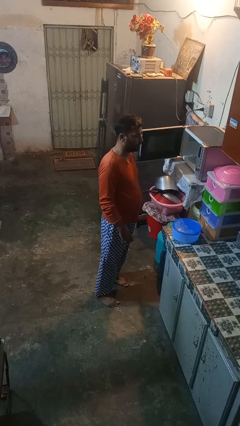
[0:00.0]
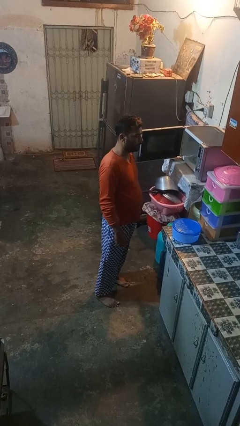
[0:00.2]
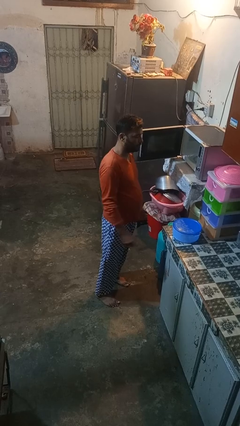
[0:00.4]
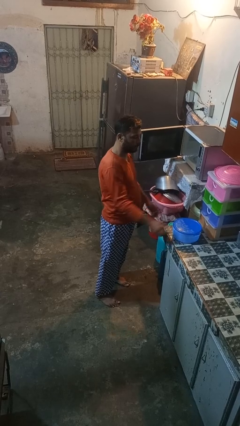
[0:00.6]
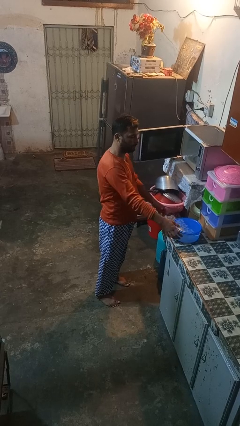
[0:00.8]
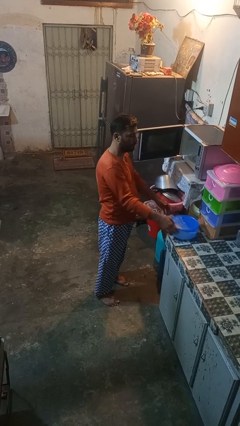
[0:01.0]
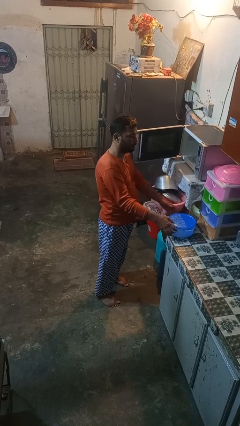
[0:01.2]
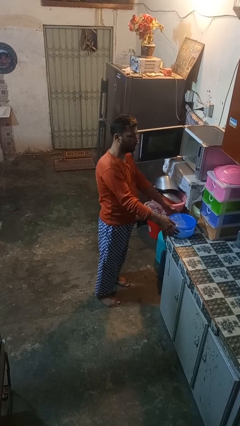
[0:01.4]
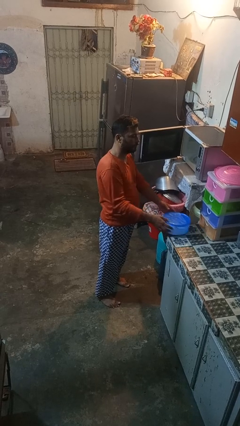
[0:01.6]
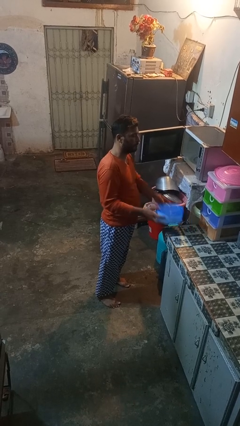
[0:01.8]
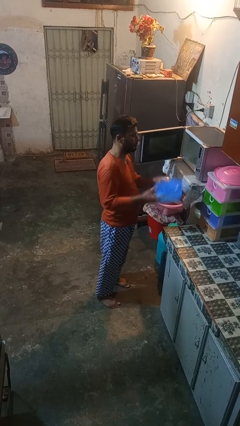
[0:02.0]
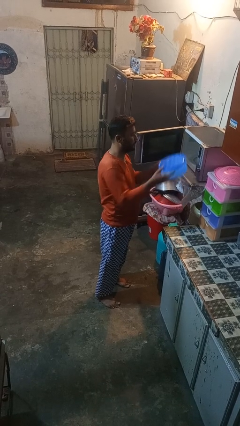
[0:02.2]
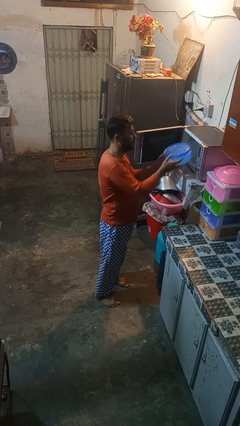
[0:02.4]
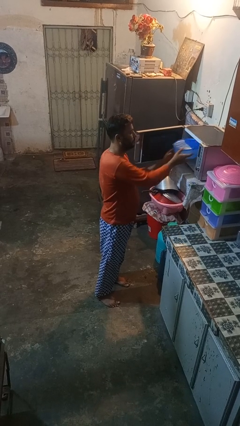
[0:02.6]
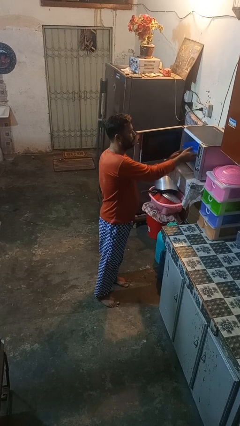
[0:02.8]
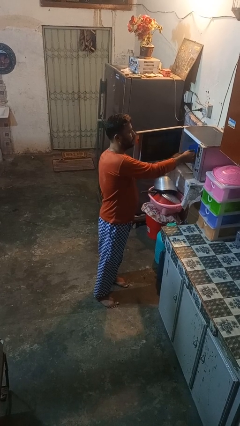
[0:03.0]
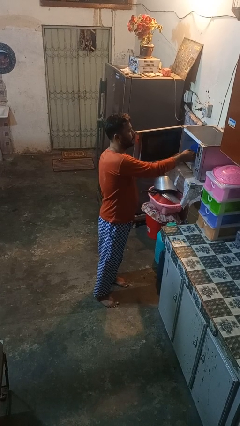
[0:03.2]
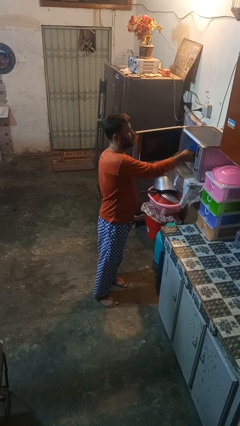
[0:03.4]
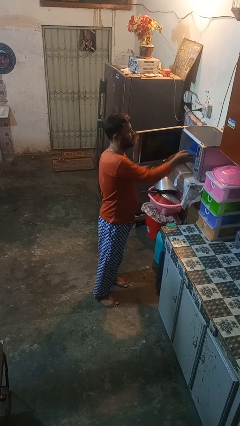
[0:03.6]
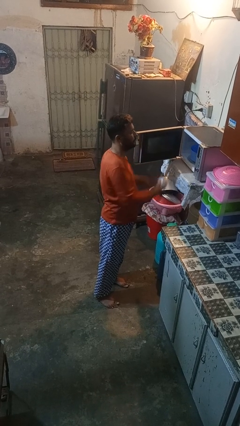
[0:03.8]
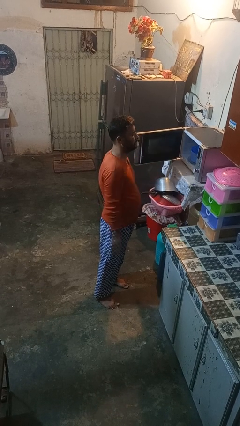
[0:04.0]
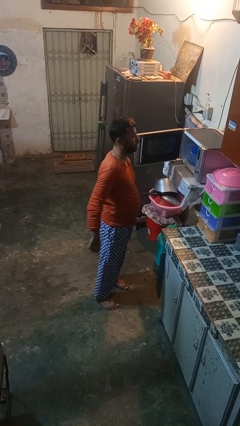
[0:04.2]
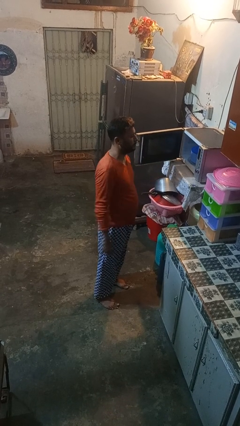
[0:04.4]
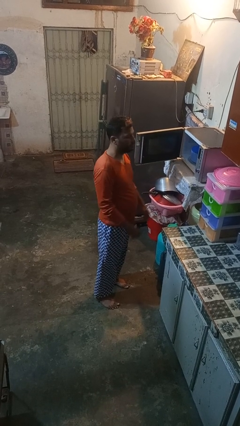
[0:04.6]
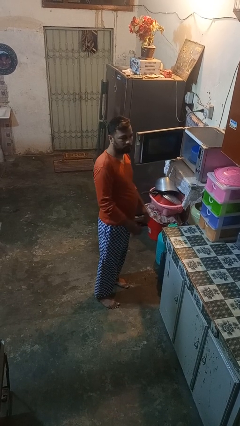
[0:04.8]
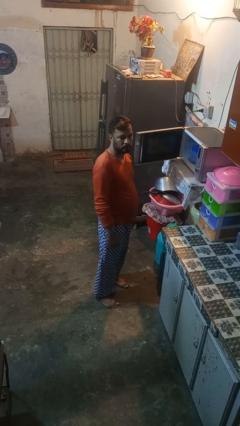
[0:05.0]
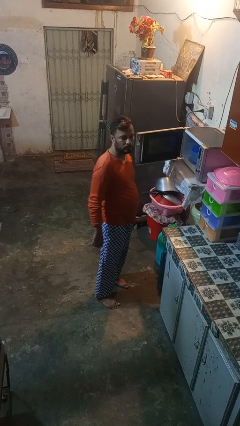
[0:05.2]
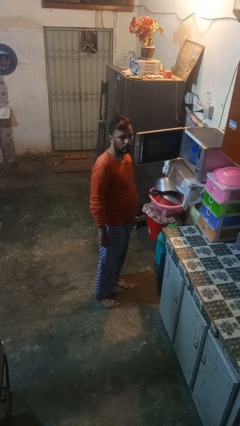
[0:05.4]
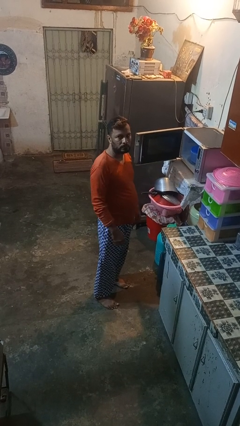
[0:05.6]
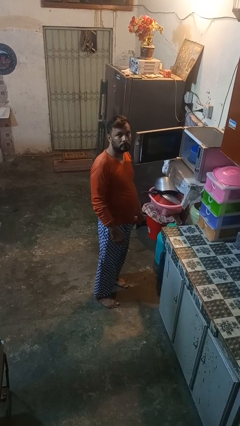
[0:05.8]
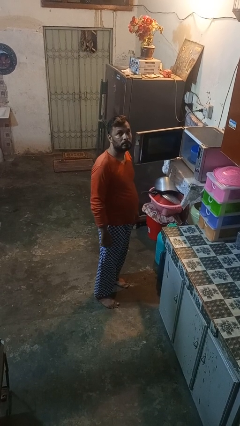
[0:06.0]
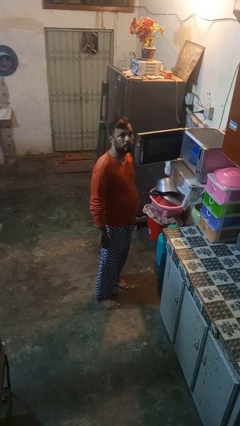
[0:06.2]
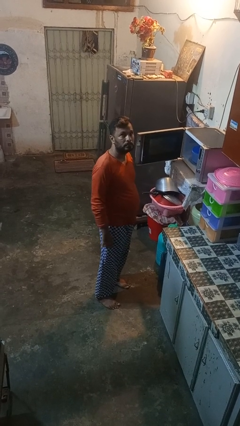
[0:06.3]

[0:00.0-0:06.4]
person puts object into microwave

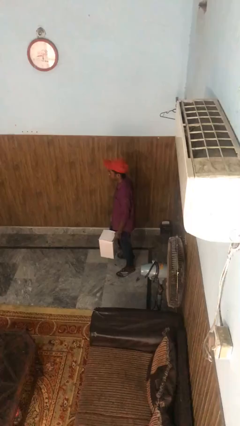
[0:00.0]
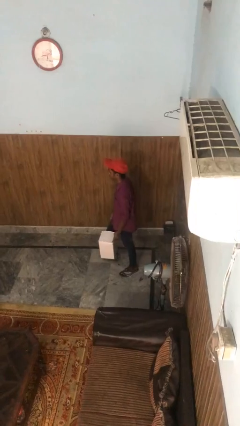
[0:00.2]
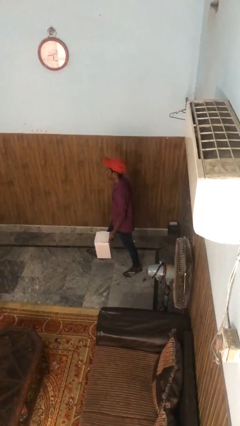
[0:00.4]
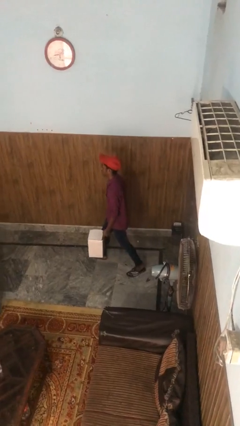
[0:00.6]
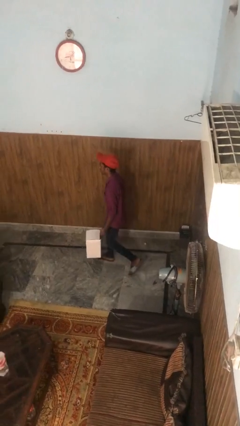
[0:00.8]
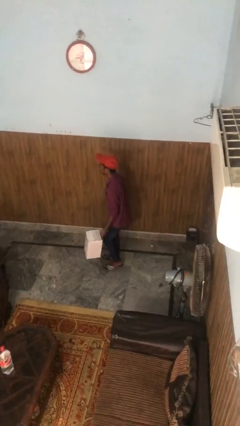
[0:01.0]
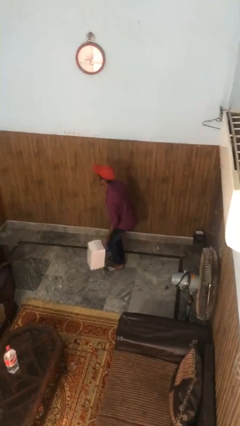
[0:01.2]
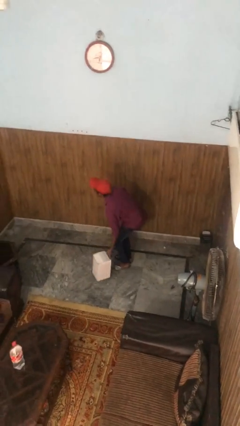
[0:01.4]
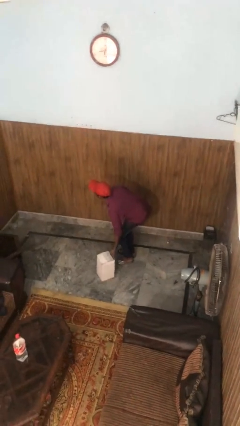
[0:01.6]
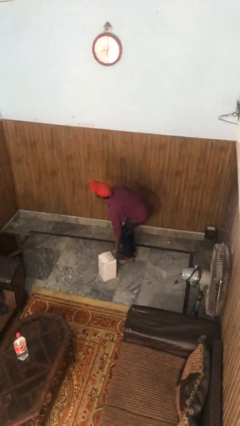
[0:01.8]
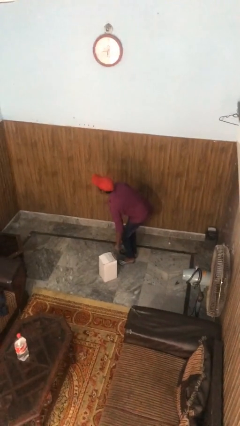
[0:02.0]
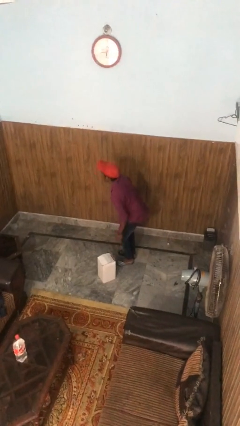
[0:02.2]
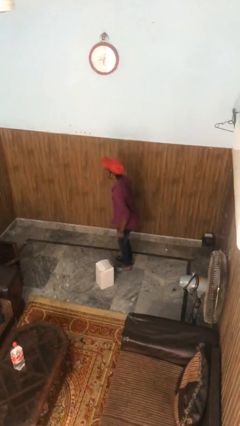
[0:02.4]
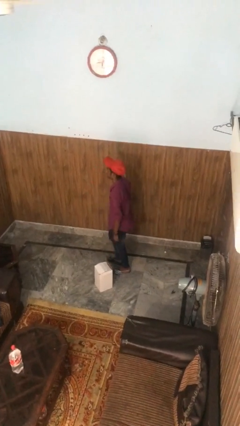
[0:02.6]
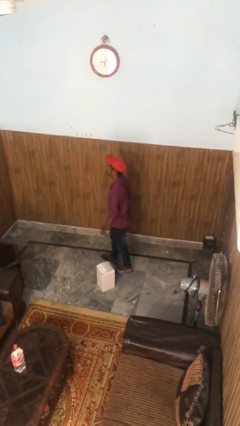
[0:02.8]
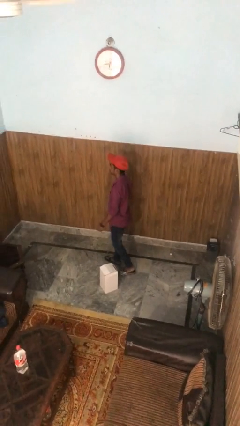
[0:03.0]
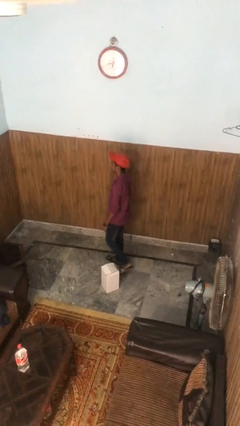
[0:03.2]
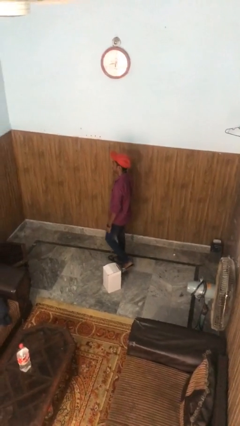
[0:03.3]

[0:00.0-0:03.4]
person puts down object on floor

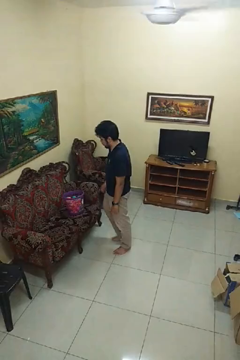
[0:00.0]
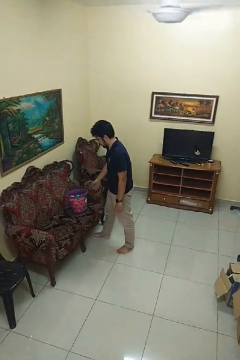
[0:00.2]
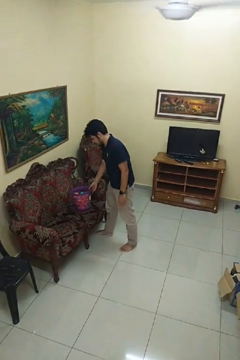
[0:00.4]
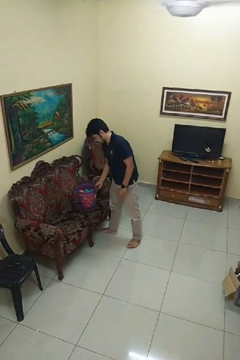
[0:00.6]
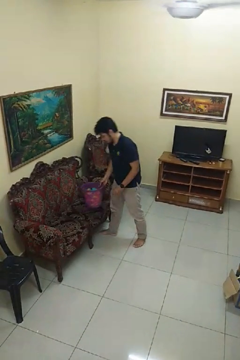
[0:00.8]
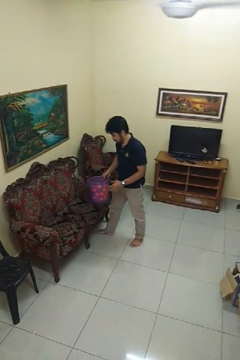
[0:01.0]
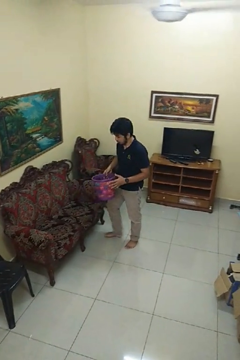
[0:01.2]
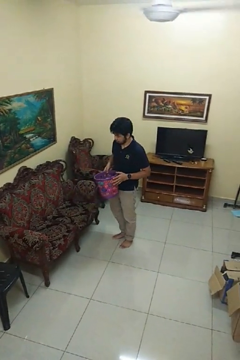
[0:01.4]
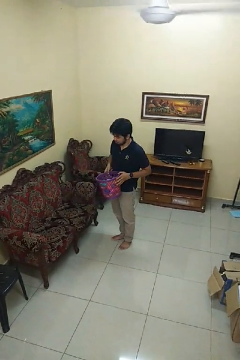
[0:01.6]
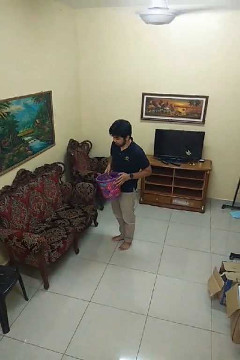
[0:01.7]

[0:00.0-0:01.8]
person picks up object from couch

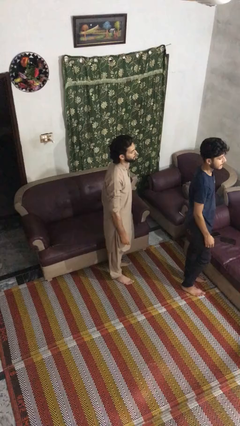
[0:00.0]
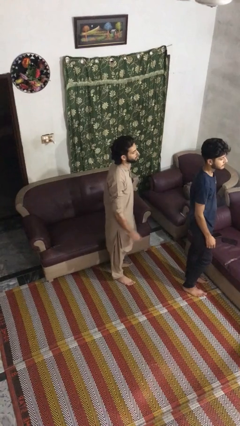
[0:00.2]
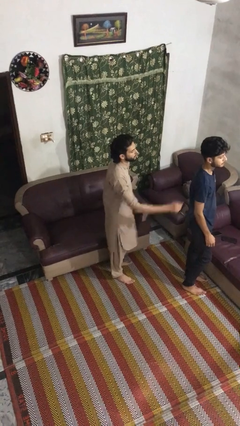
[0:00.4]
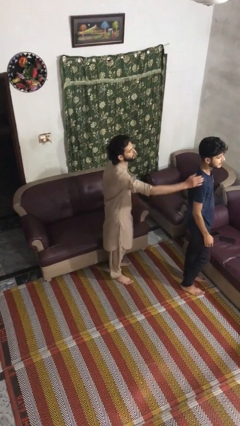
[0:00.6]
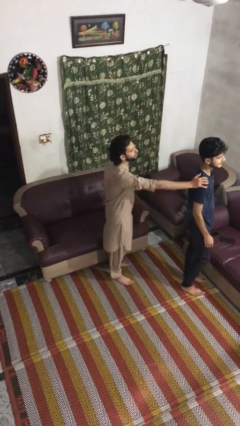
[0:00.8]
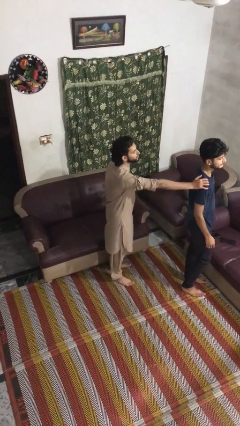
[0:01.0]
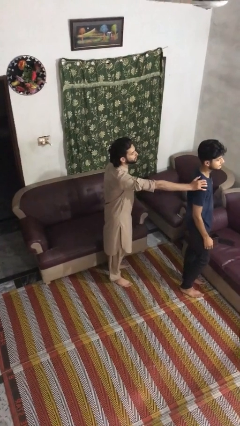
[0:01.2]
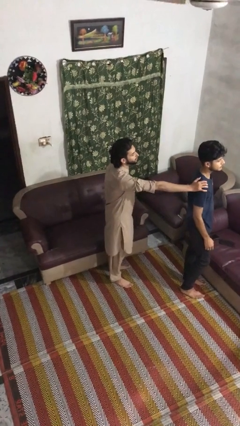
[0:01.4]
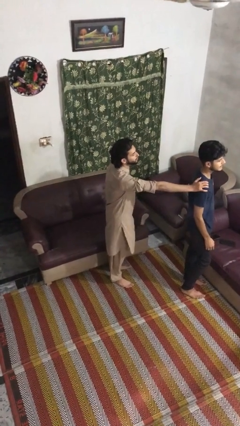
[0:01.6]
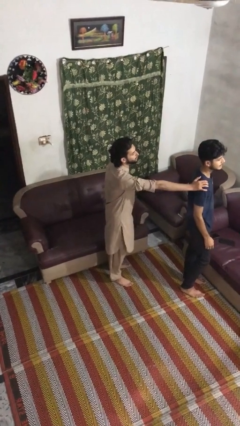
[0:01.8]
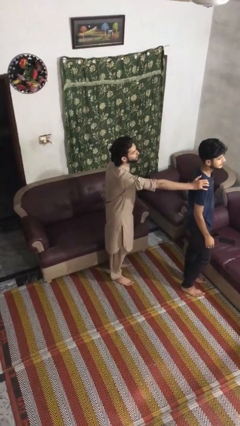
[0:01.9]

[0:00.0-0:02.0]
person grabs person by shoulder

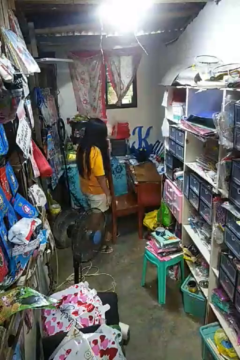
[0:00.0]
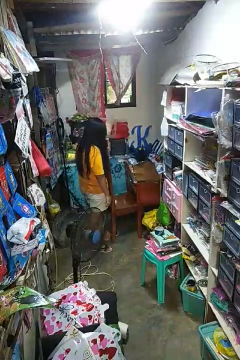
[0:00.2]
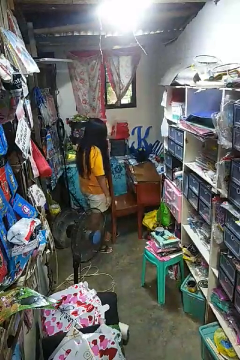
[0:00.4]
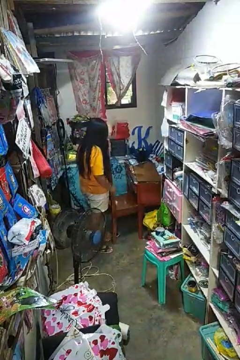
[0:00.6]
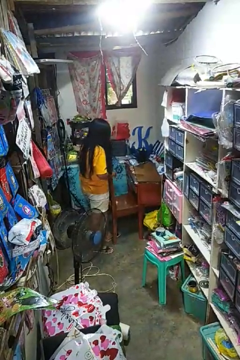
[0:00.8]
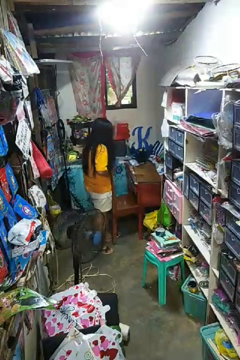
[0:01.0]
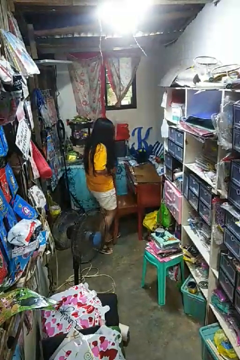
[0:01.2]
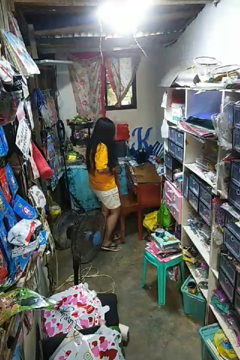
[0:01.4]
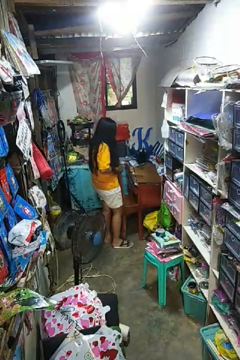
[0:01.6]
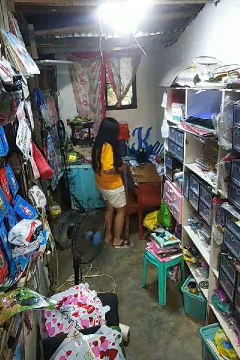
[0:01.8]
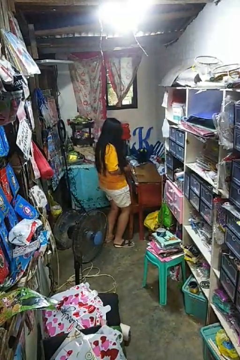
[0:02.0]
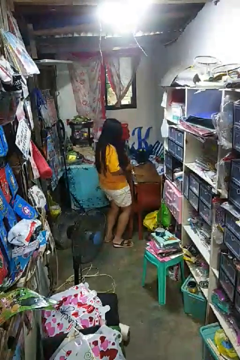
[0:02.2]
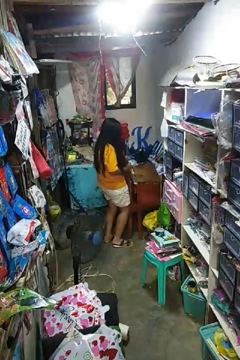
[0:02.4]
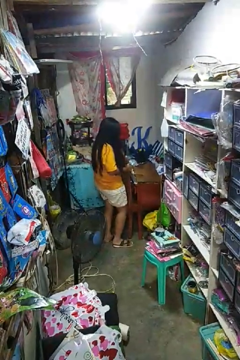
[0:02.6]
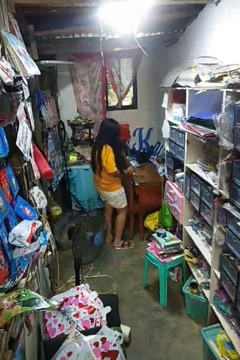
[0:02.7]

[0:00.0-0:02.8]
person pushes in chair

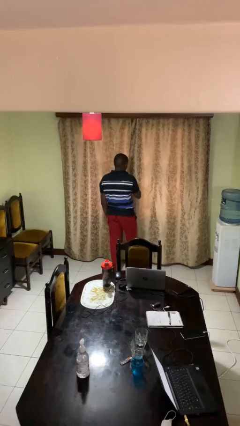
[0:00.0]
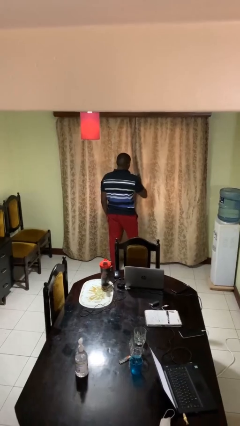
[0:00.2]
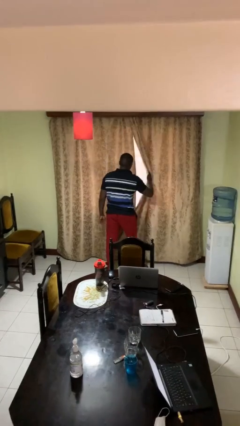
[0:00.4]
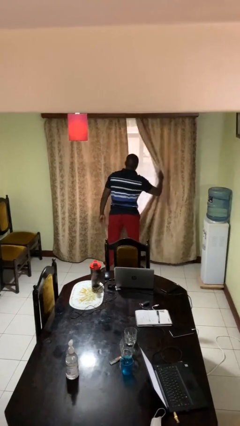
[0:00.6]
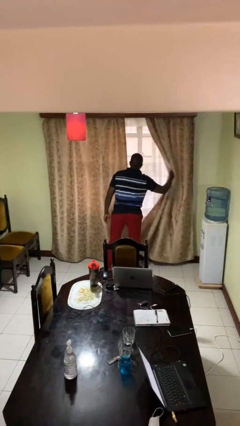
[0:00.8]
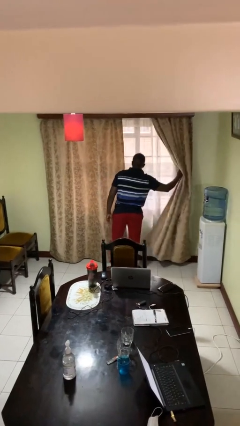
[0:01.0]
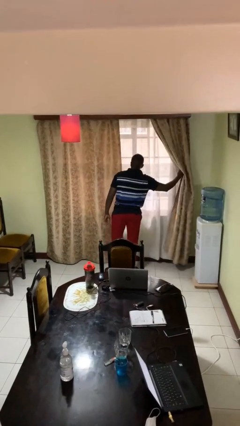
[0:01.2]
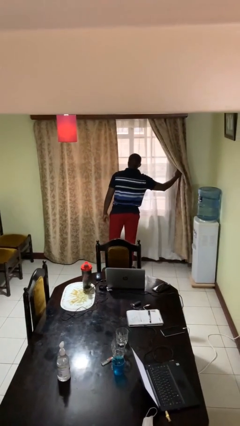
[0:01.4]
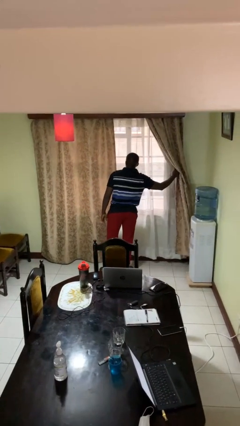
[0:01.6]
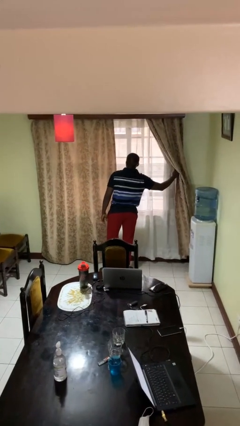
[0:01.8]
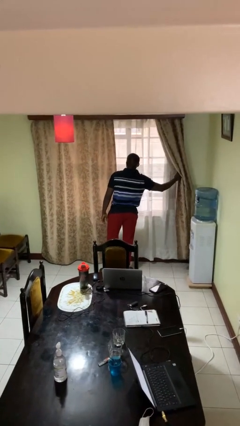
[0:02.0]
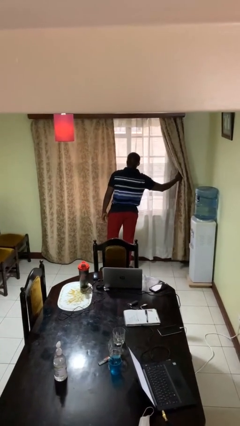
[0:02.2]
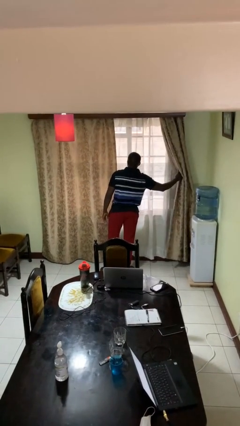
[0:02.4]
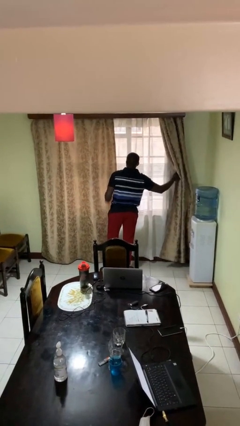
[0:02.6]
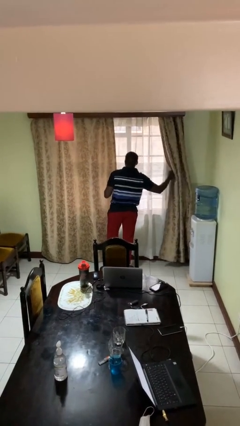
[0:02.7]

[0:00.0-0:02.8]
person opens curtains
